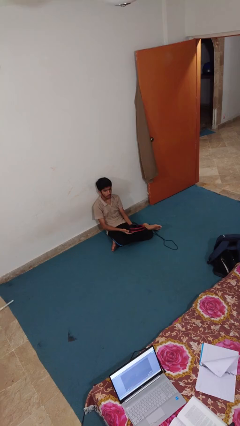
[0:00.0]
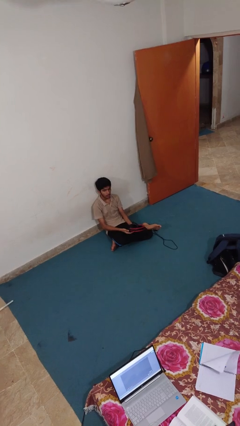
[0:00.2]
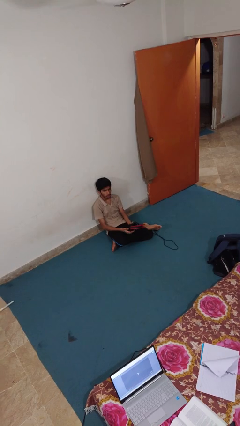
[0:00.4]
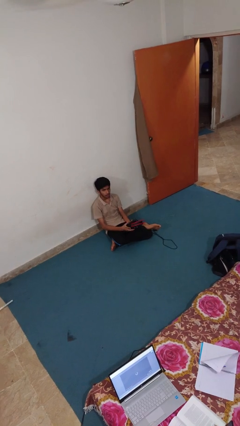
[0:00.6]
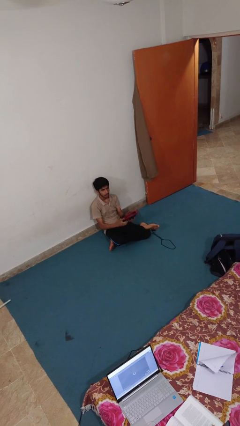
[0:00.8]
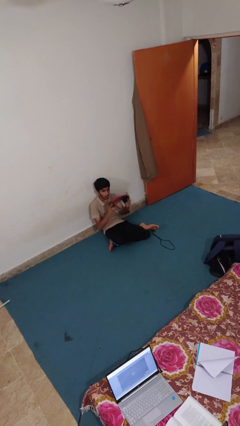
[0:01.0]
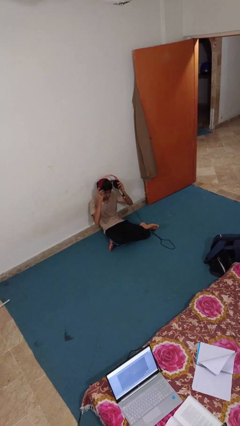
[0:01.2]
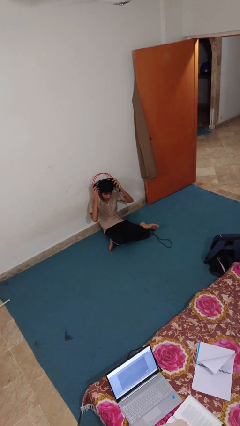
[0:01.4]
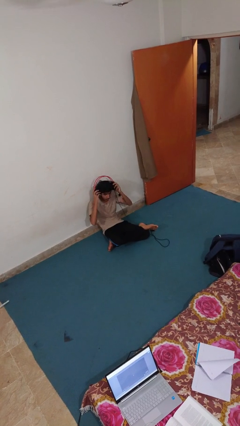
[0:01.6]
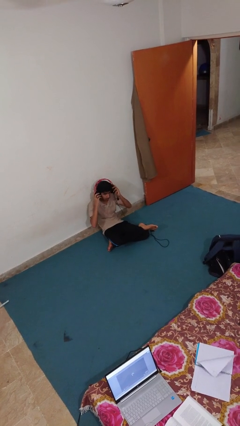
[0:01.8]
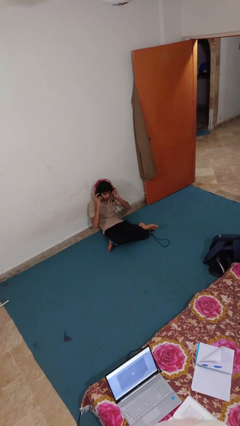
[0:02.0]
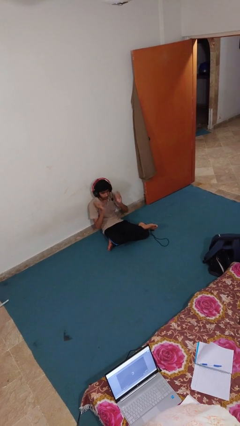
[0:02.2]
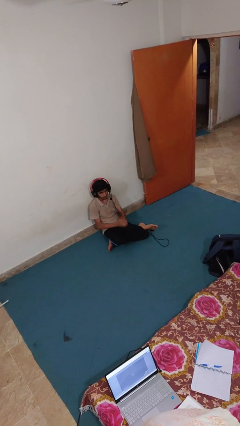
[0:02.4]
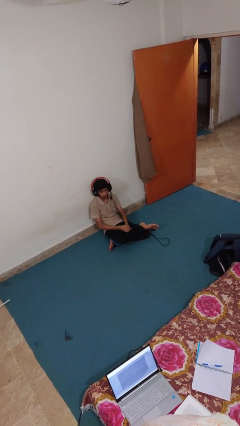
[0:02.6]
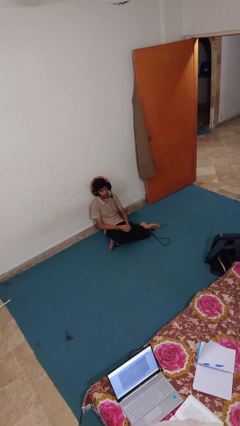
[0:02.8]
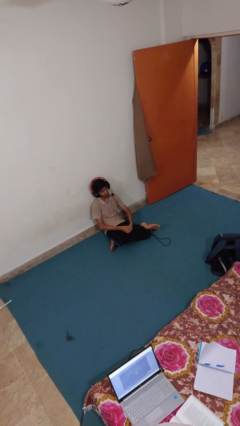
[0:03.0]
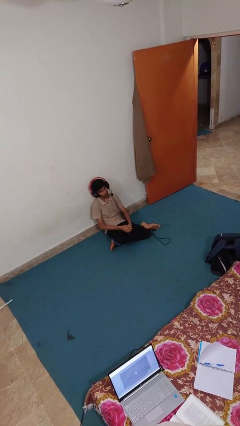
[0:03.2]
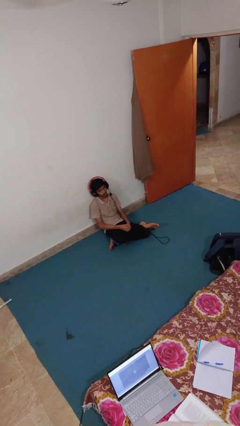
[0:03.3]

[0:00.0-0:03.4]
person puts on headphones

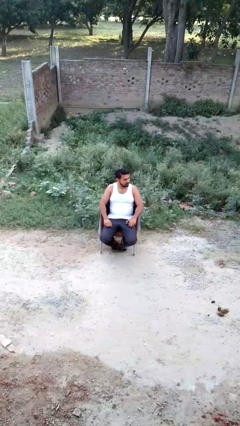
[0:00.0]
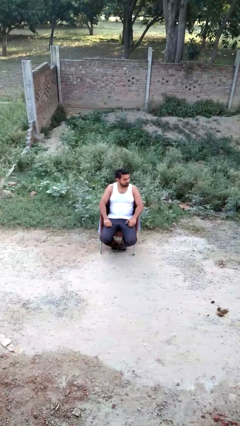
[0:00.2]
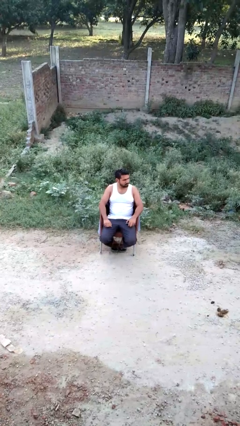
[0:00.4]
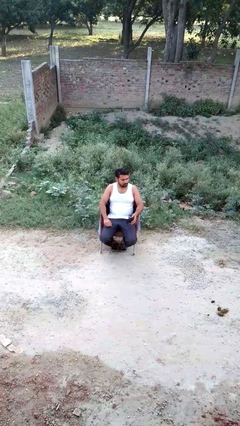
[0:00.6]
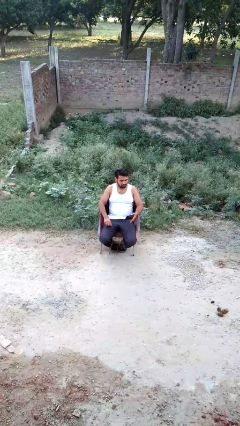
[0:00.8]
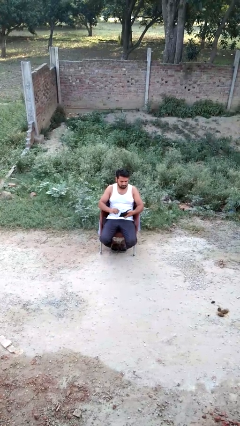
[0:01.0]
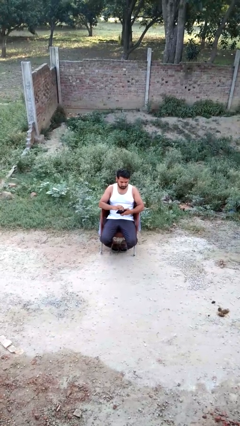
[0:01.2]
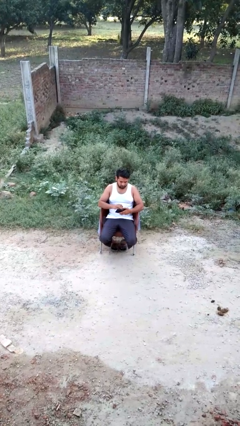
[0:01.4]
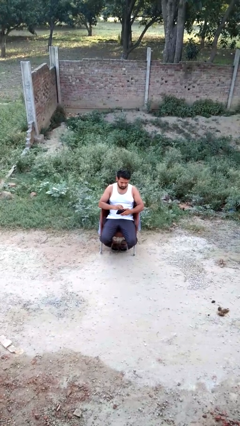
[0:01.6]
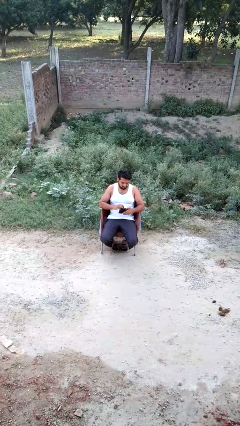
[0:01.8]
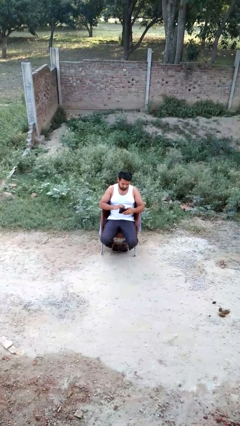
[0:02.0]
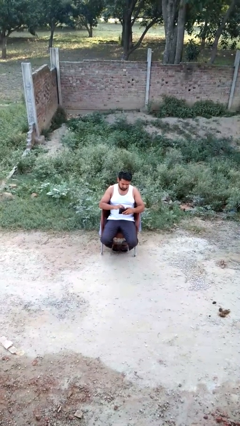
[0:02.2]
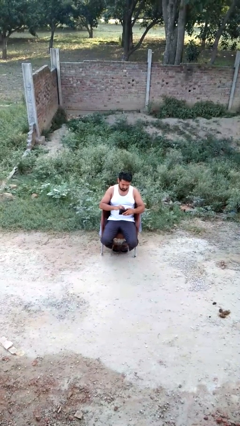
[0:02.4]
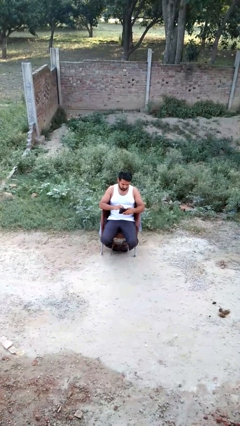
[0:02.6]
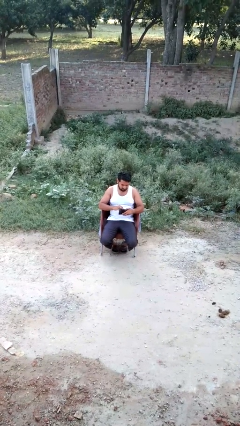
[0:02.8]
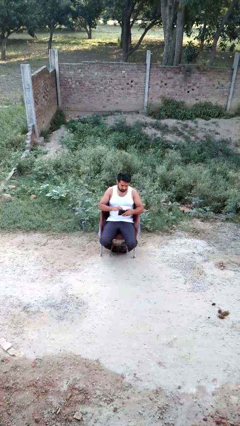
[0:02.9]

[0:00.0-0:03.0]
person searches in purse

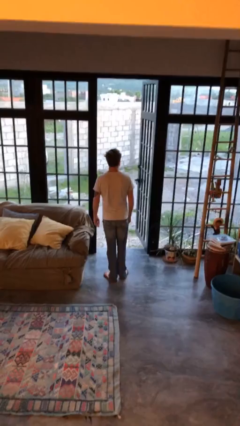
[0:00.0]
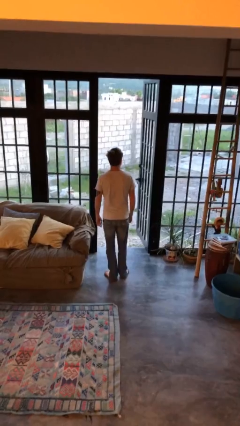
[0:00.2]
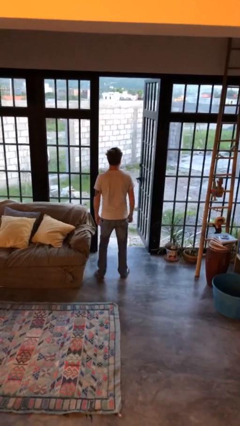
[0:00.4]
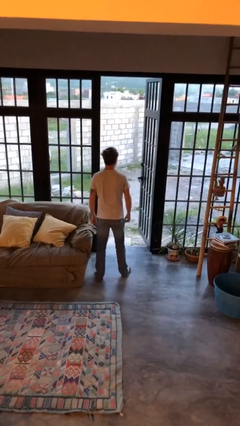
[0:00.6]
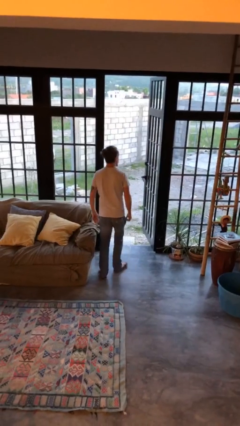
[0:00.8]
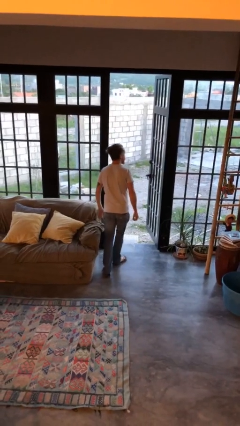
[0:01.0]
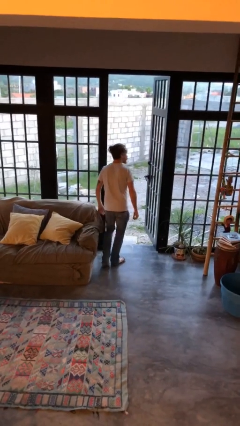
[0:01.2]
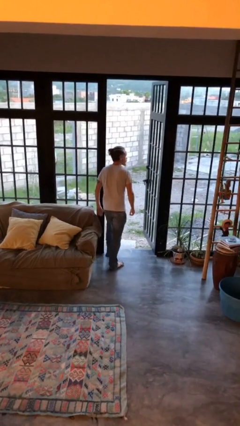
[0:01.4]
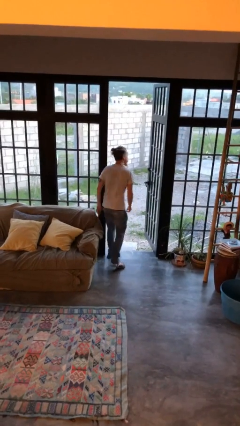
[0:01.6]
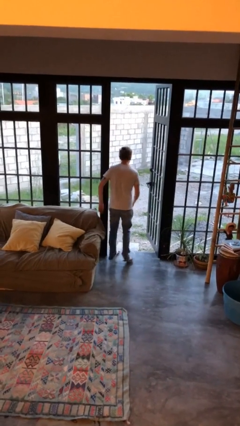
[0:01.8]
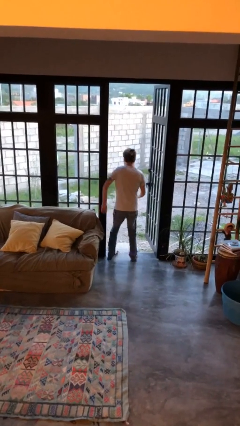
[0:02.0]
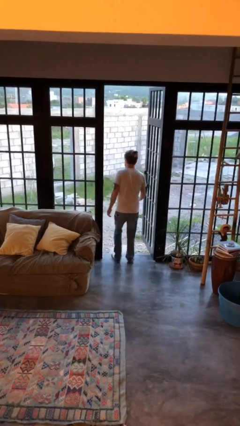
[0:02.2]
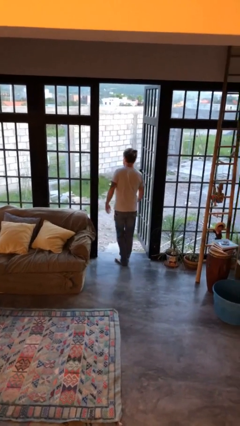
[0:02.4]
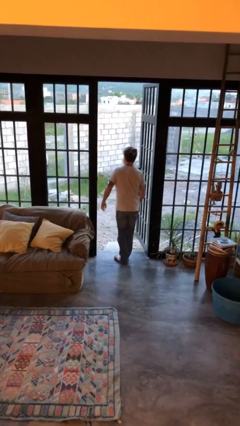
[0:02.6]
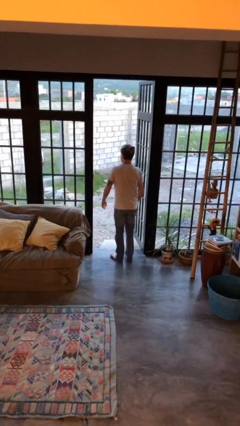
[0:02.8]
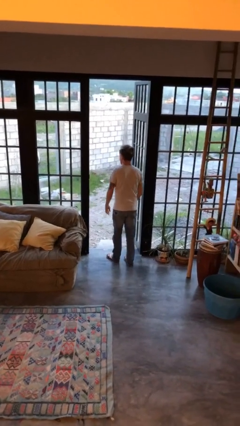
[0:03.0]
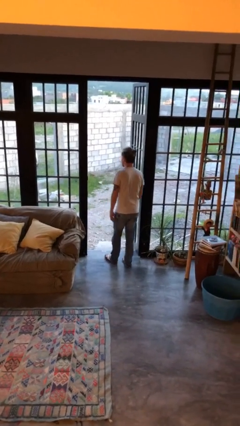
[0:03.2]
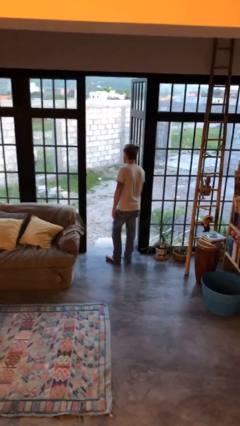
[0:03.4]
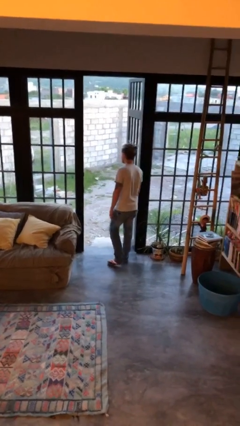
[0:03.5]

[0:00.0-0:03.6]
person bumps into wall

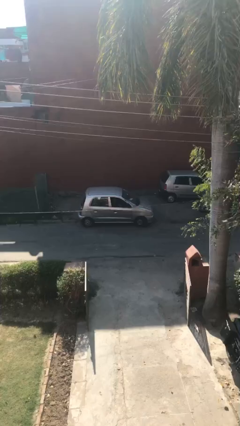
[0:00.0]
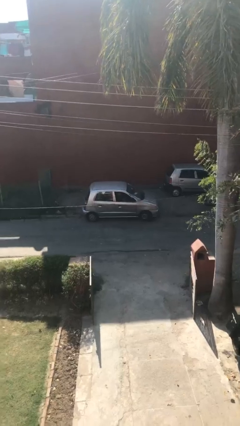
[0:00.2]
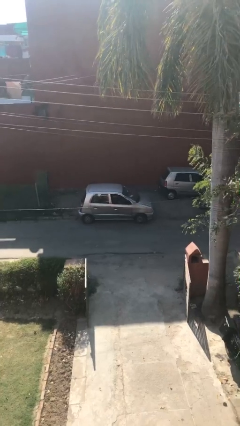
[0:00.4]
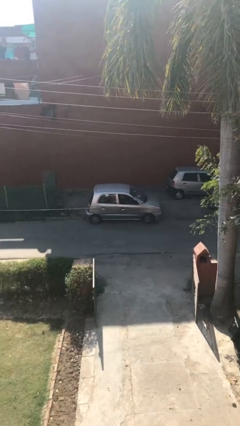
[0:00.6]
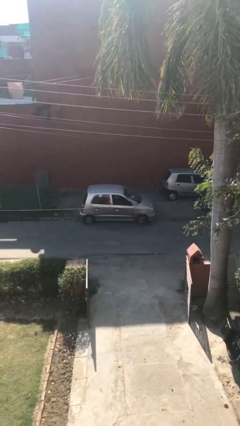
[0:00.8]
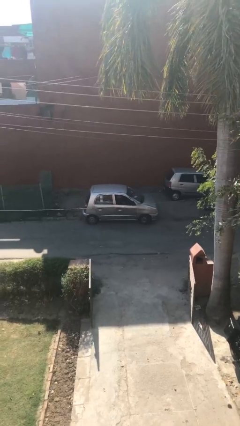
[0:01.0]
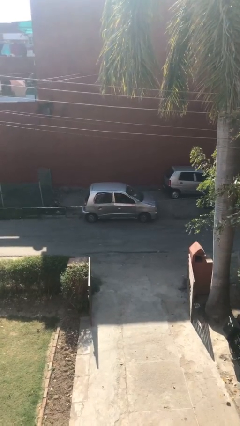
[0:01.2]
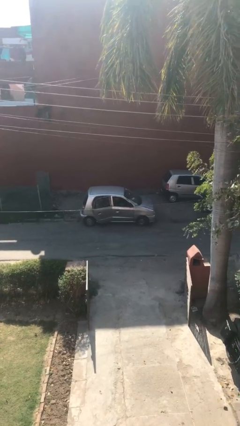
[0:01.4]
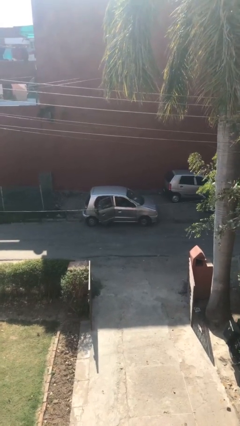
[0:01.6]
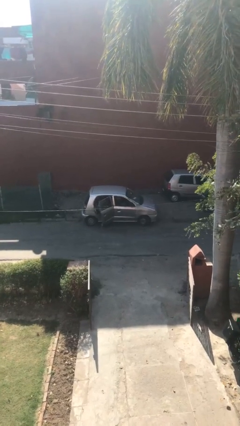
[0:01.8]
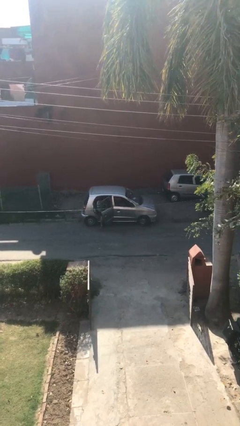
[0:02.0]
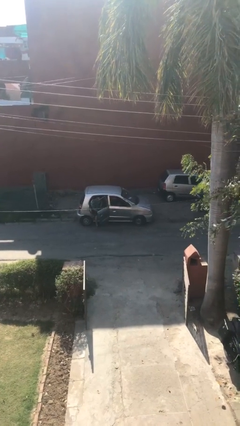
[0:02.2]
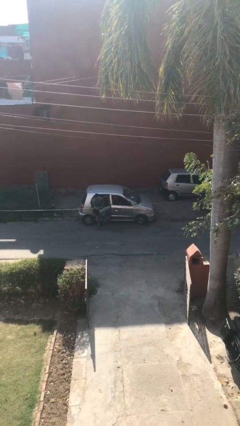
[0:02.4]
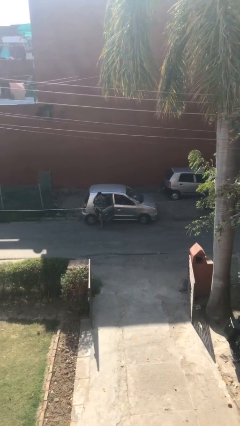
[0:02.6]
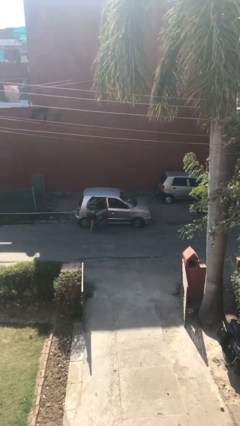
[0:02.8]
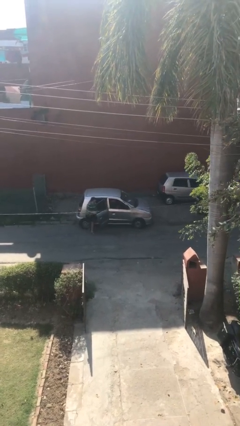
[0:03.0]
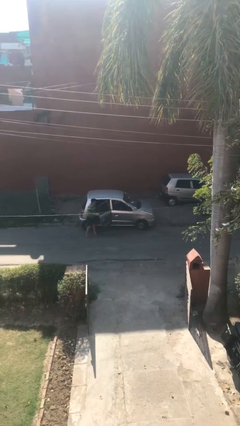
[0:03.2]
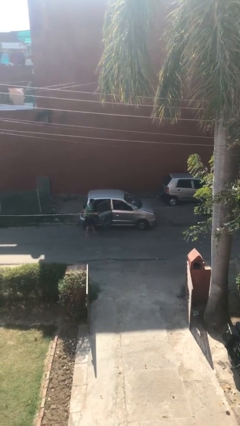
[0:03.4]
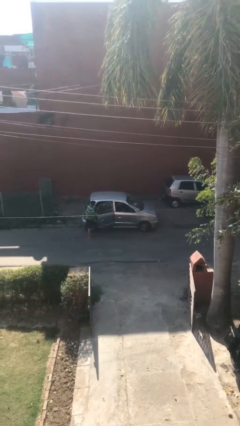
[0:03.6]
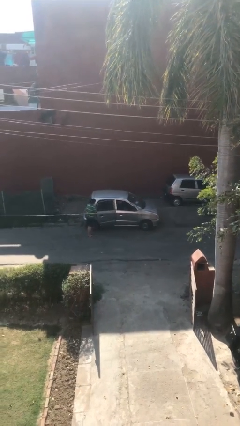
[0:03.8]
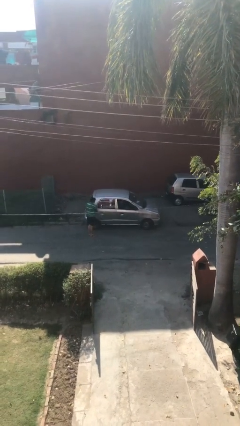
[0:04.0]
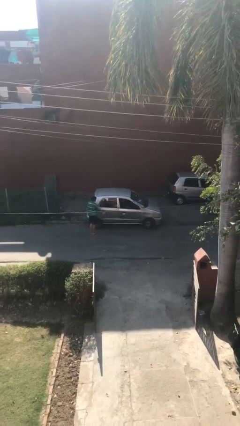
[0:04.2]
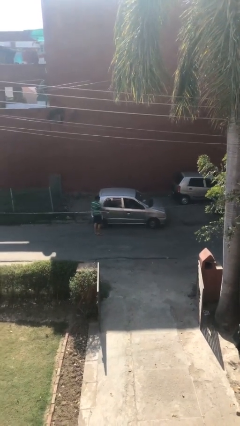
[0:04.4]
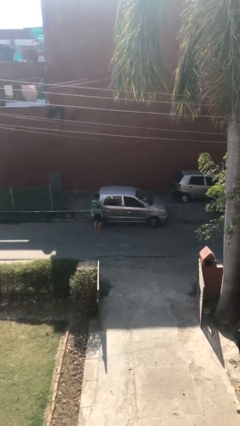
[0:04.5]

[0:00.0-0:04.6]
car drops off person

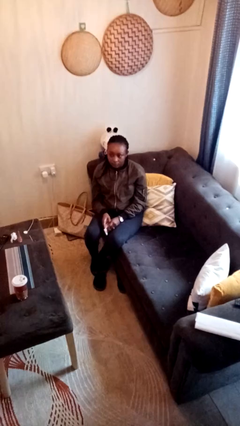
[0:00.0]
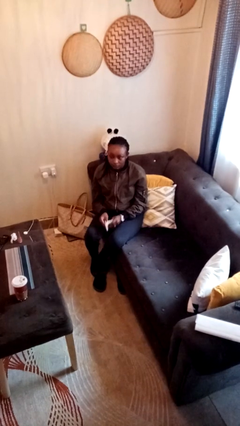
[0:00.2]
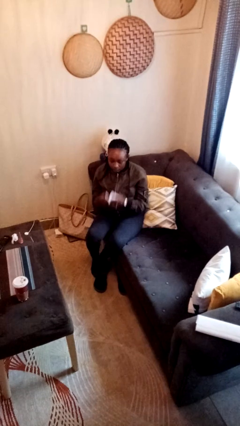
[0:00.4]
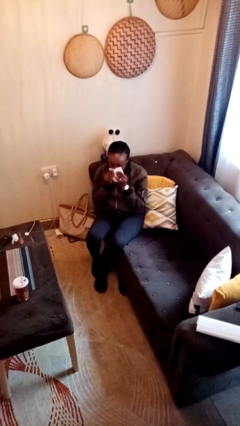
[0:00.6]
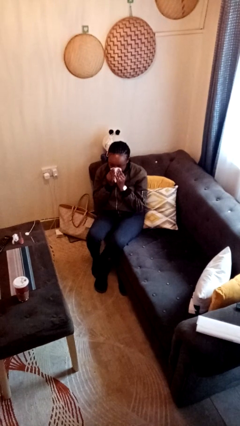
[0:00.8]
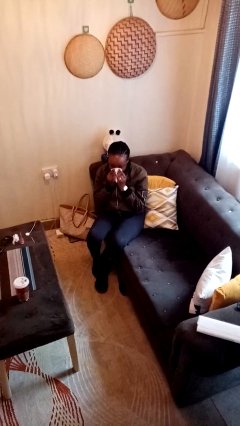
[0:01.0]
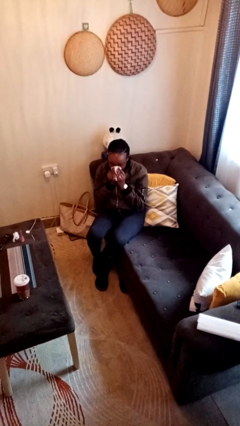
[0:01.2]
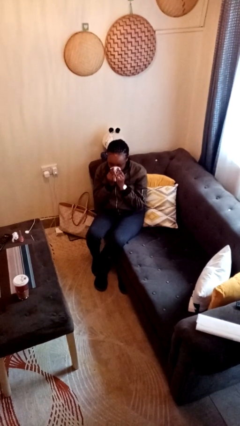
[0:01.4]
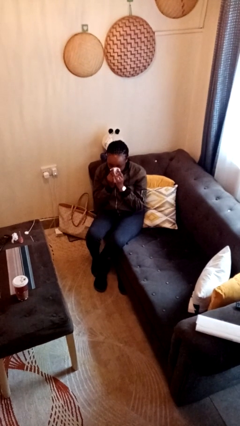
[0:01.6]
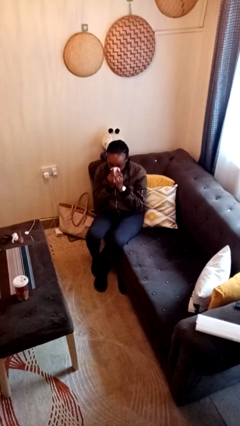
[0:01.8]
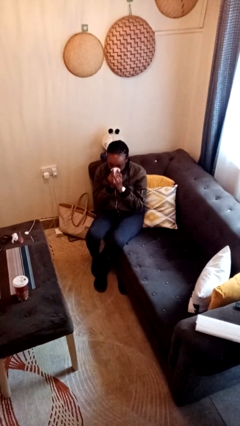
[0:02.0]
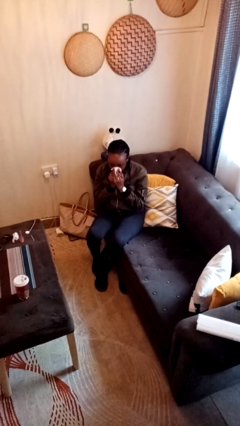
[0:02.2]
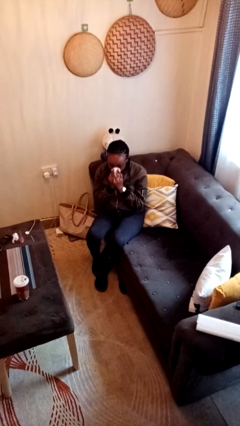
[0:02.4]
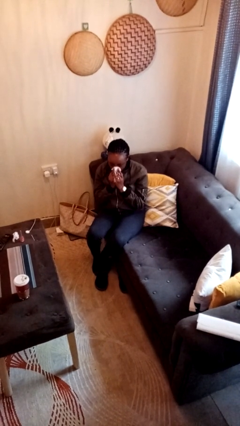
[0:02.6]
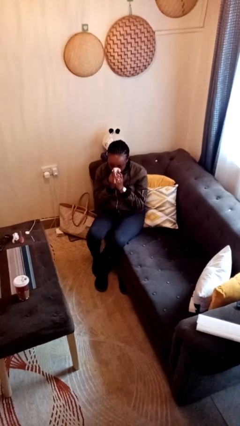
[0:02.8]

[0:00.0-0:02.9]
person blows nose

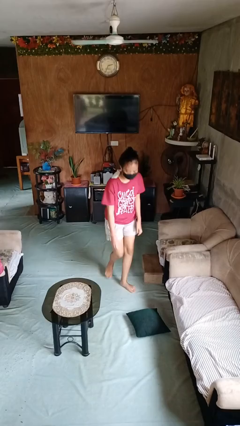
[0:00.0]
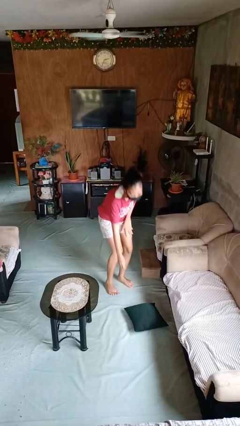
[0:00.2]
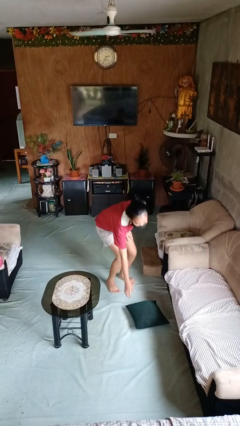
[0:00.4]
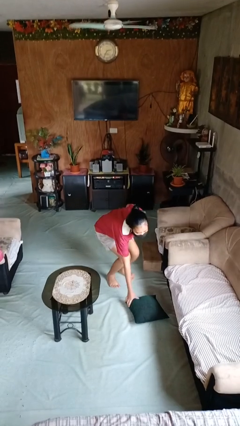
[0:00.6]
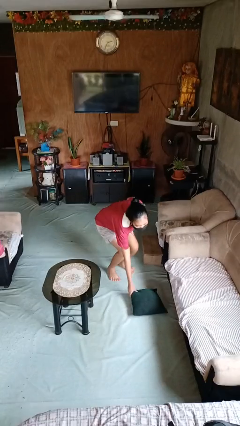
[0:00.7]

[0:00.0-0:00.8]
person picks up object from floor
